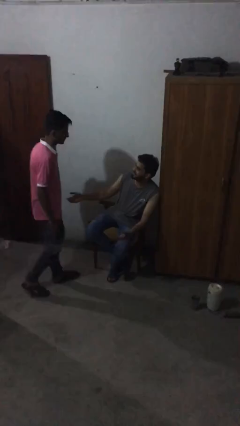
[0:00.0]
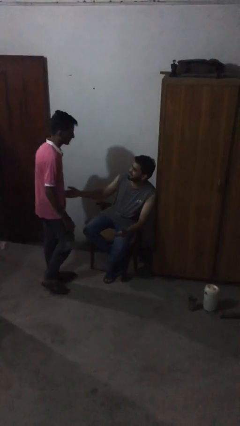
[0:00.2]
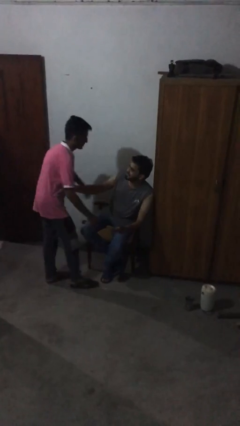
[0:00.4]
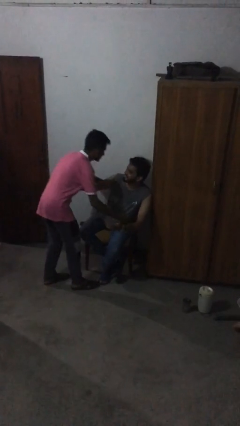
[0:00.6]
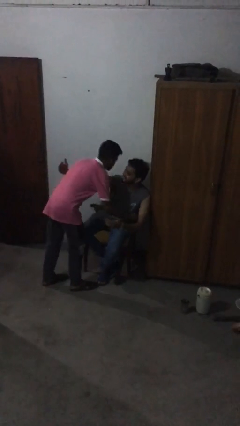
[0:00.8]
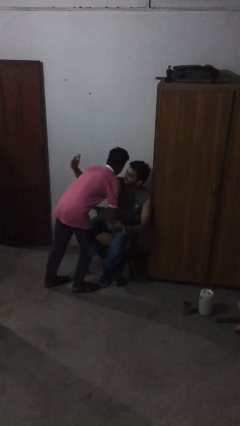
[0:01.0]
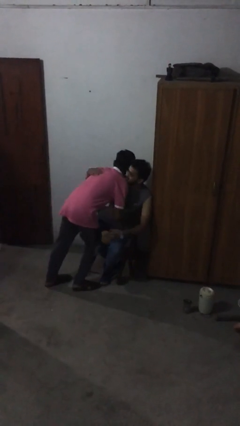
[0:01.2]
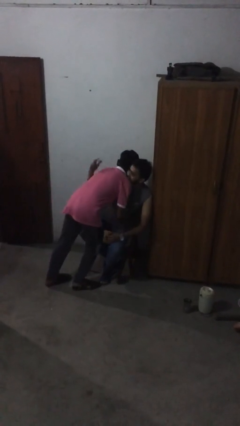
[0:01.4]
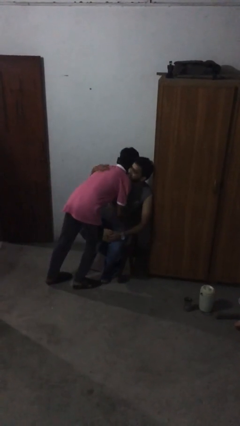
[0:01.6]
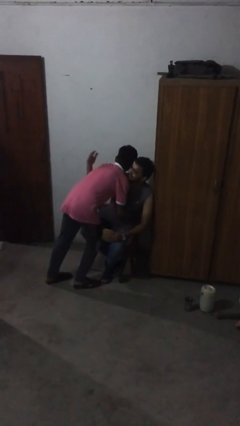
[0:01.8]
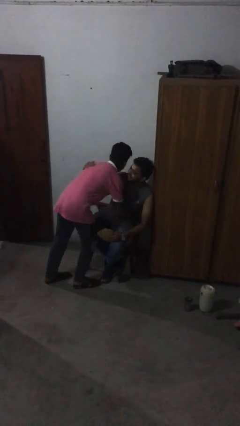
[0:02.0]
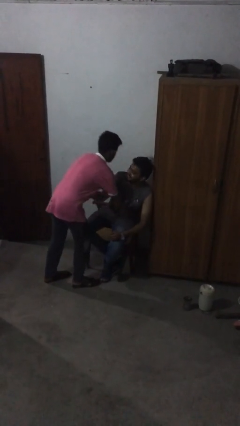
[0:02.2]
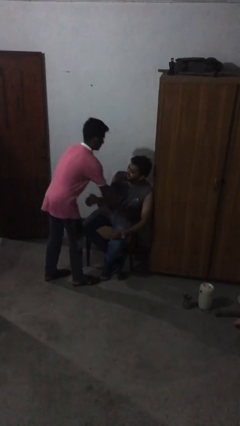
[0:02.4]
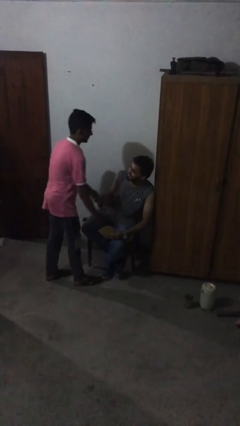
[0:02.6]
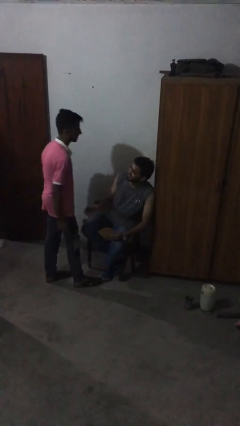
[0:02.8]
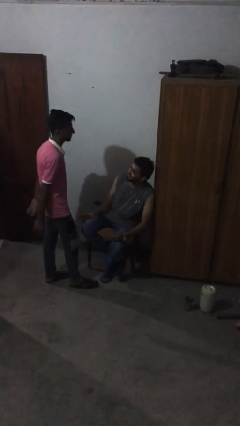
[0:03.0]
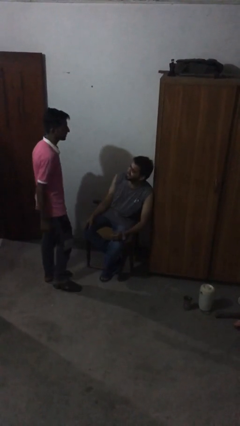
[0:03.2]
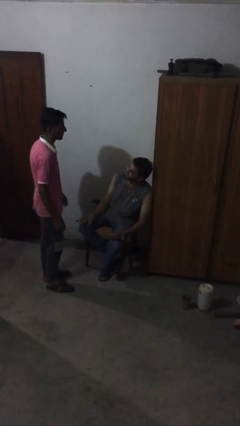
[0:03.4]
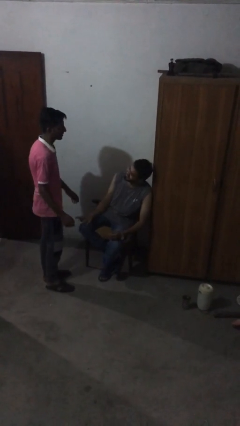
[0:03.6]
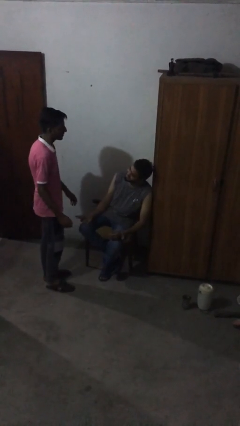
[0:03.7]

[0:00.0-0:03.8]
person embraces person

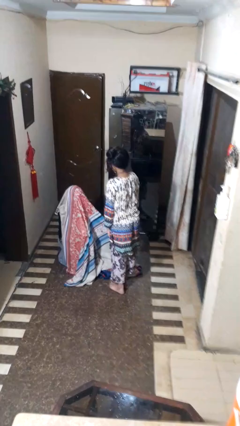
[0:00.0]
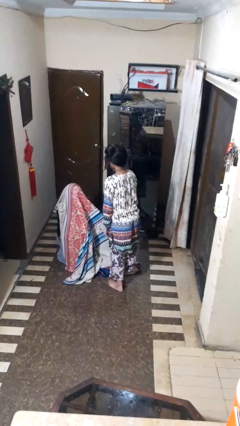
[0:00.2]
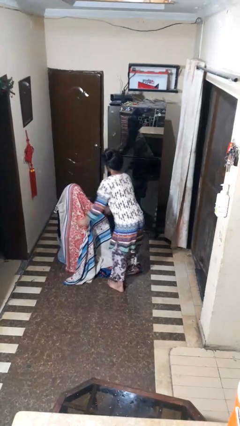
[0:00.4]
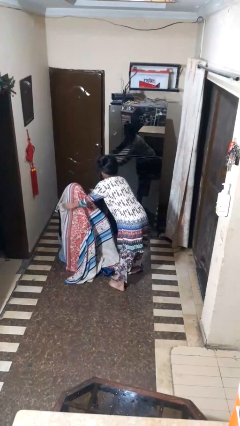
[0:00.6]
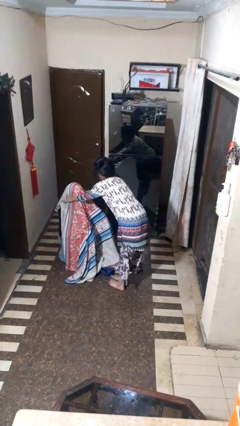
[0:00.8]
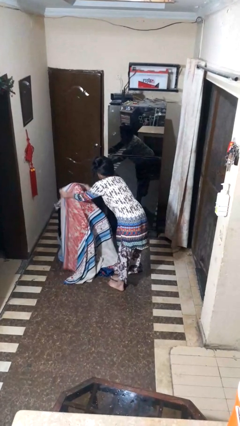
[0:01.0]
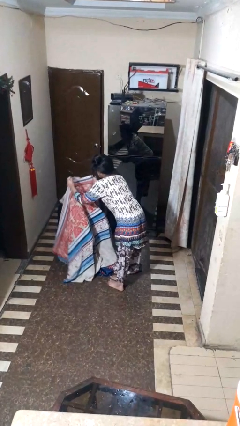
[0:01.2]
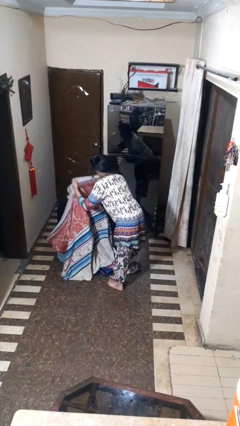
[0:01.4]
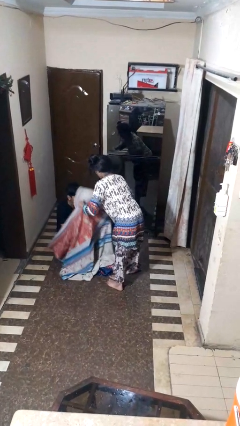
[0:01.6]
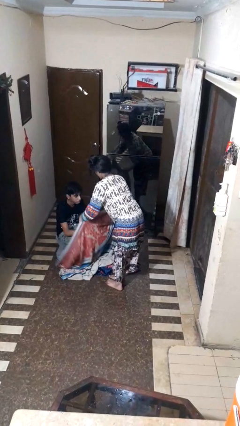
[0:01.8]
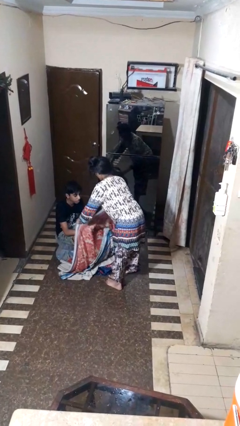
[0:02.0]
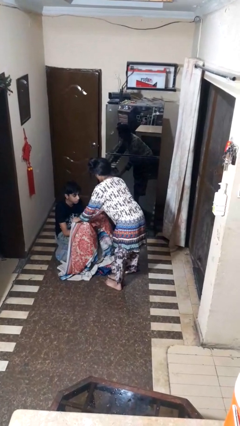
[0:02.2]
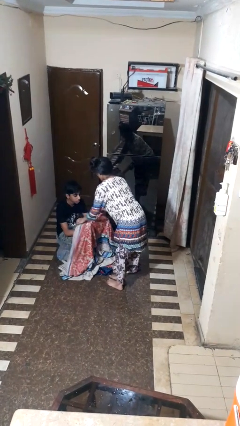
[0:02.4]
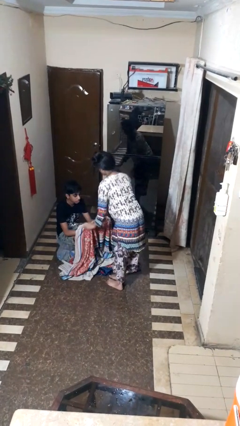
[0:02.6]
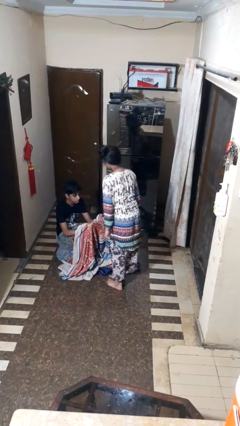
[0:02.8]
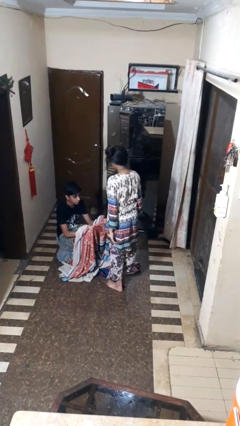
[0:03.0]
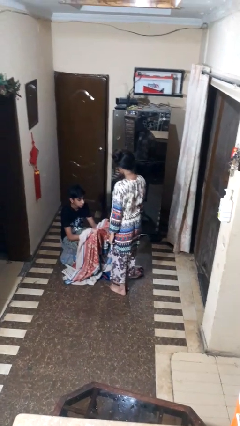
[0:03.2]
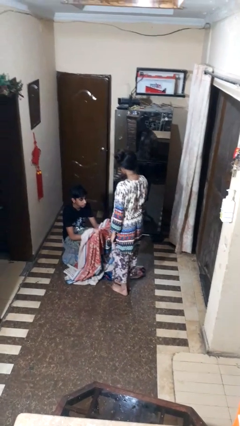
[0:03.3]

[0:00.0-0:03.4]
person uncovers friend with blanket

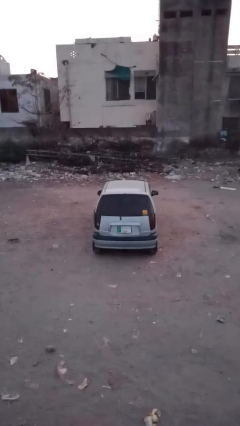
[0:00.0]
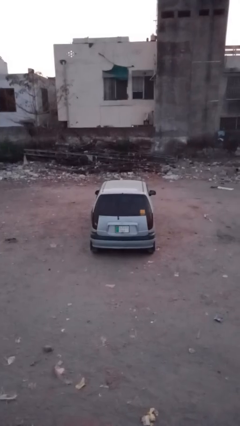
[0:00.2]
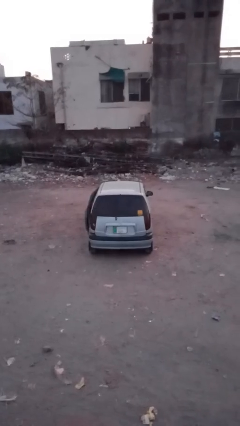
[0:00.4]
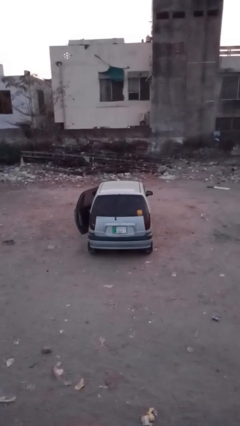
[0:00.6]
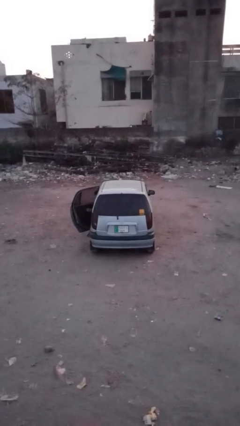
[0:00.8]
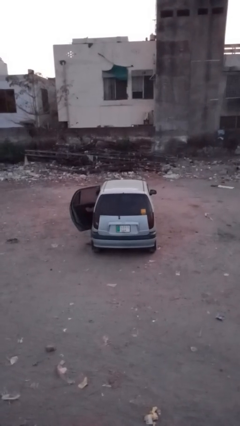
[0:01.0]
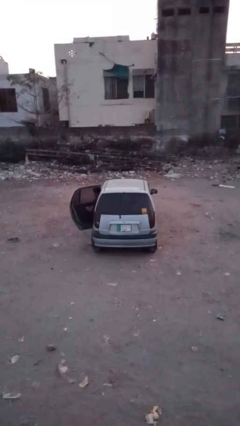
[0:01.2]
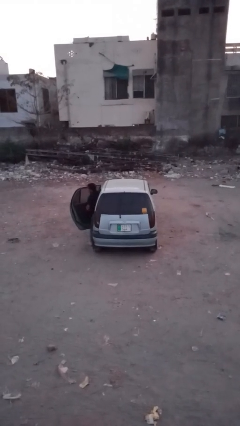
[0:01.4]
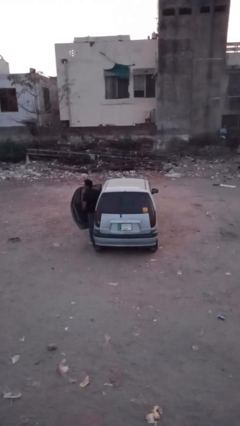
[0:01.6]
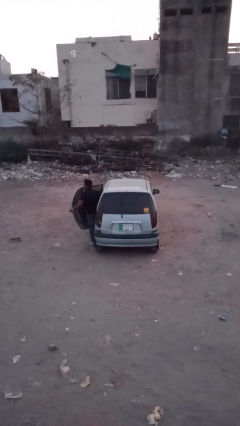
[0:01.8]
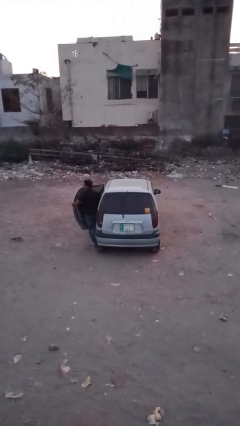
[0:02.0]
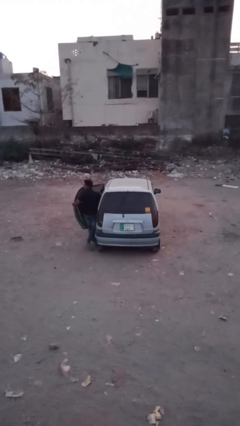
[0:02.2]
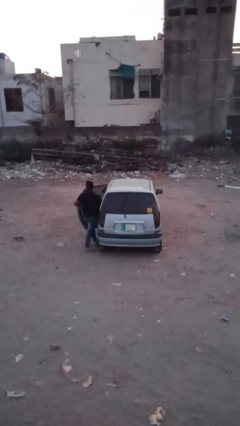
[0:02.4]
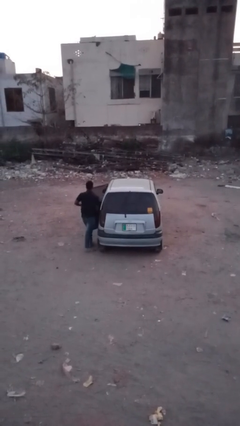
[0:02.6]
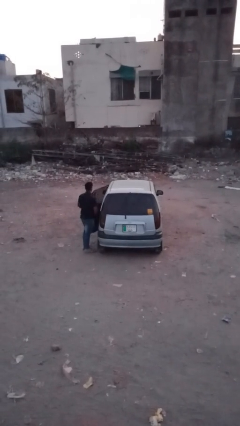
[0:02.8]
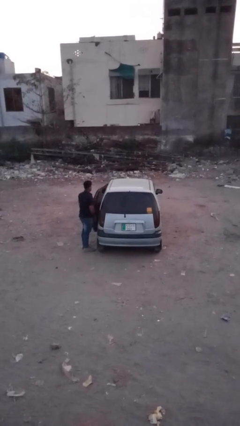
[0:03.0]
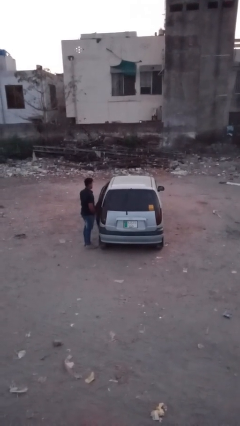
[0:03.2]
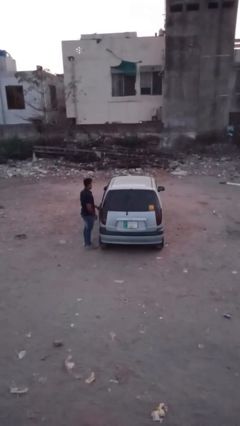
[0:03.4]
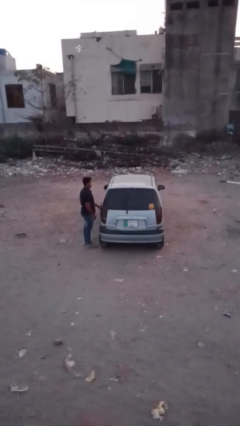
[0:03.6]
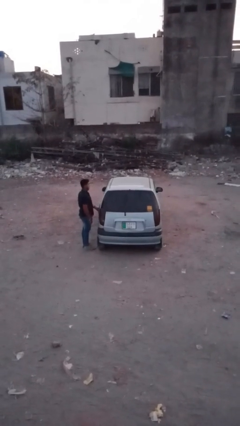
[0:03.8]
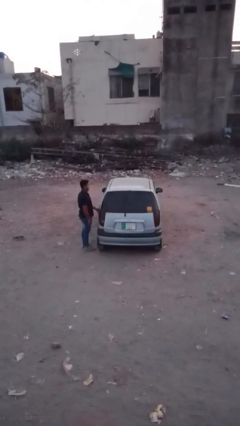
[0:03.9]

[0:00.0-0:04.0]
car drops off person

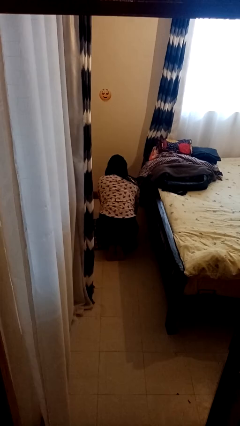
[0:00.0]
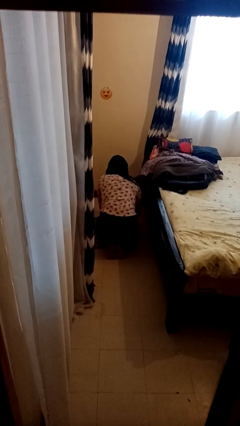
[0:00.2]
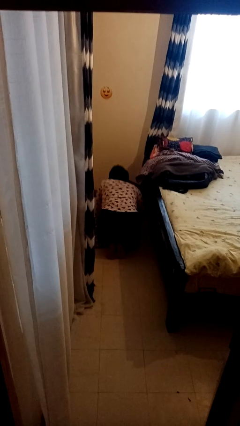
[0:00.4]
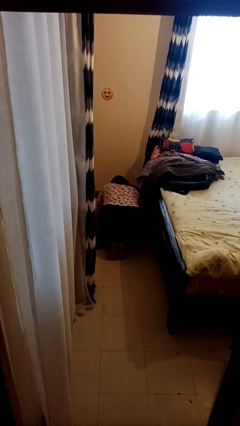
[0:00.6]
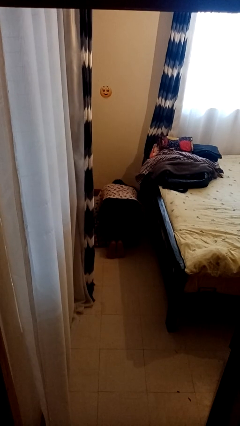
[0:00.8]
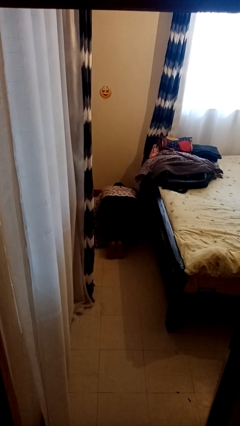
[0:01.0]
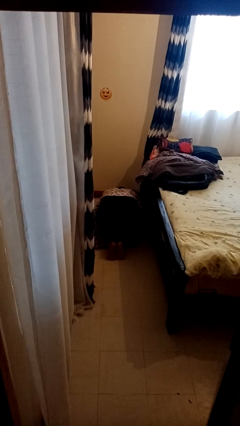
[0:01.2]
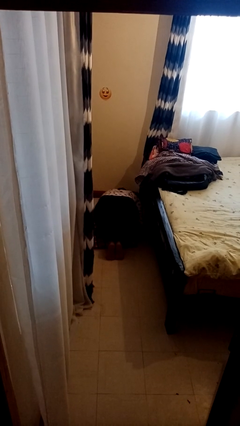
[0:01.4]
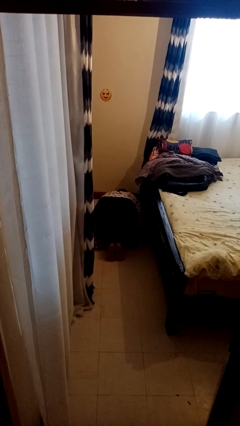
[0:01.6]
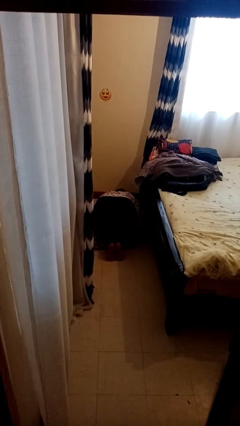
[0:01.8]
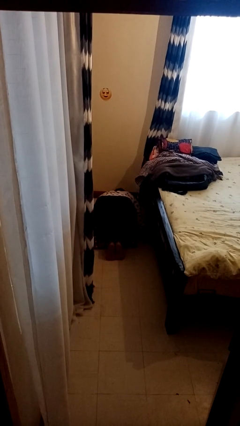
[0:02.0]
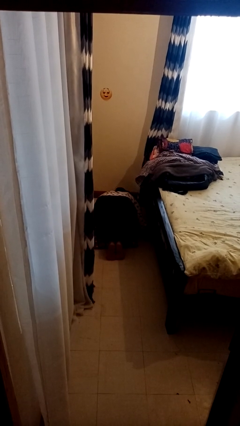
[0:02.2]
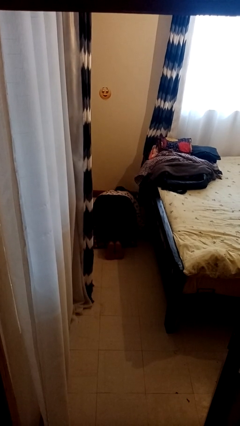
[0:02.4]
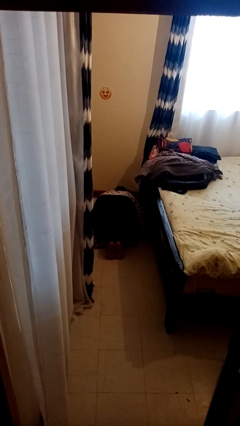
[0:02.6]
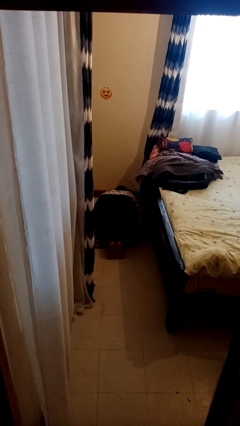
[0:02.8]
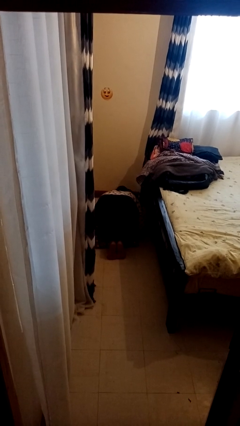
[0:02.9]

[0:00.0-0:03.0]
person searches under bed

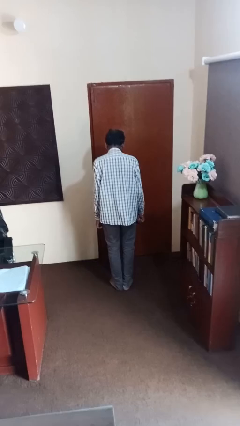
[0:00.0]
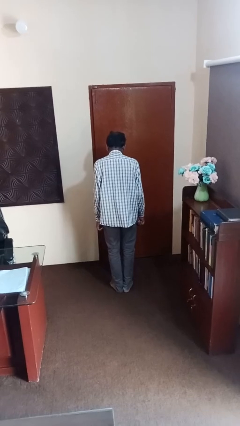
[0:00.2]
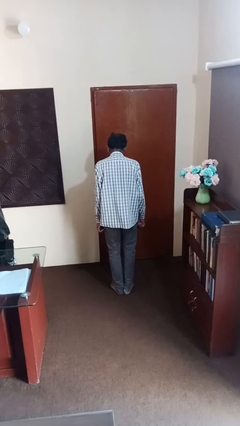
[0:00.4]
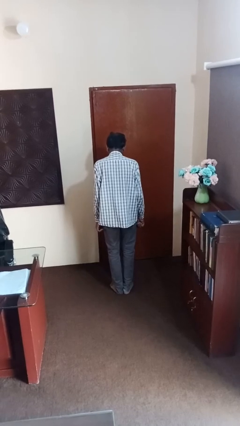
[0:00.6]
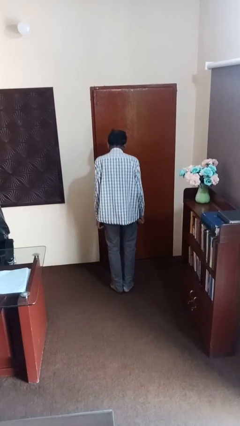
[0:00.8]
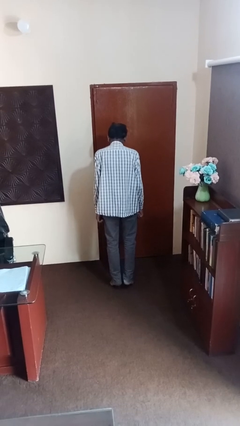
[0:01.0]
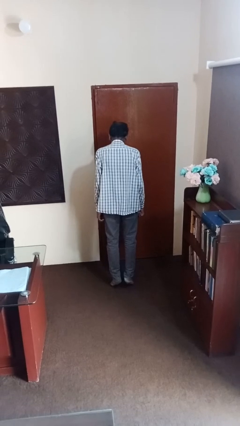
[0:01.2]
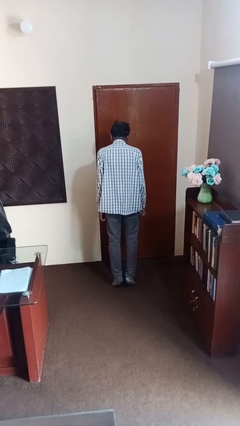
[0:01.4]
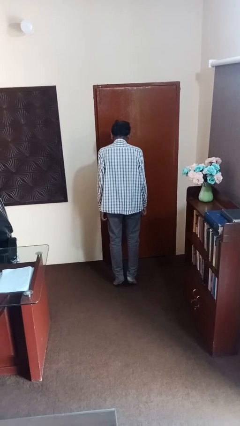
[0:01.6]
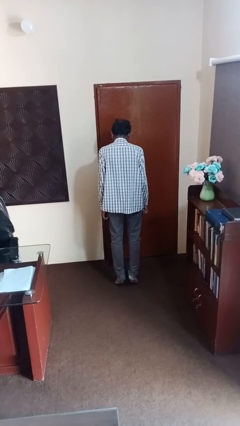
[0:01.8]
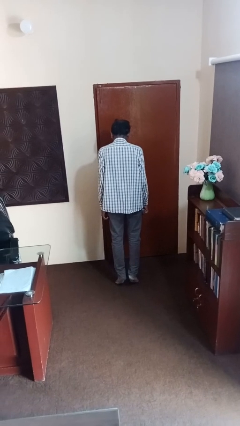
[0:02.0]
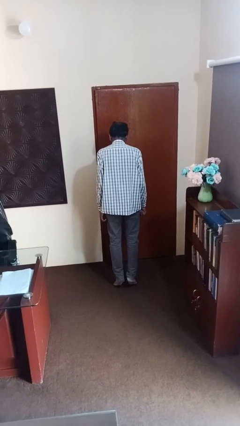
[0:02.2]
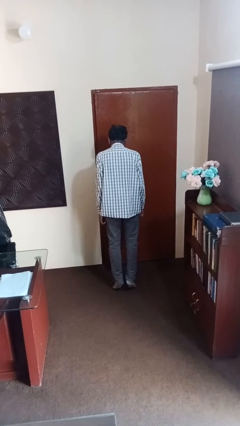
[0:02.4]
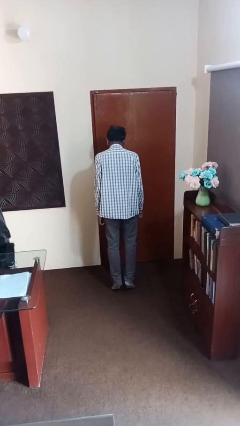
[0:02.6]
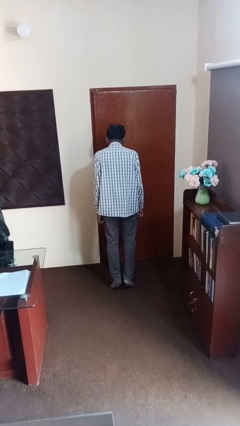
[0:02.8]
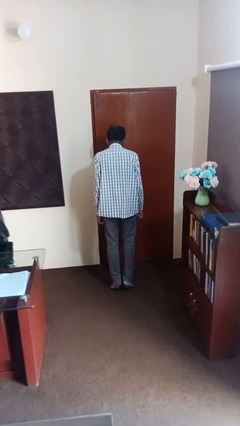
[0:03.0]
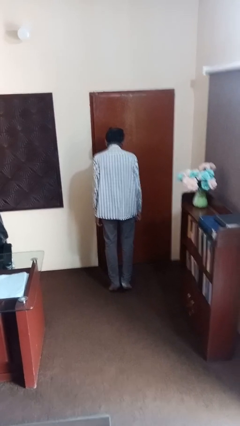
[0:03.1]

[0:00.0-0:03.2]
person walks tiptoe
